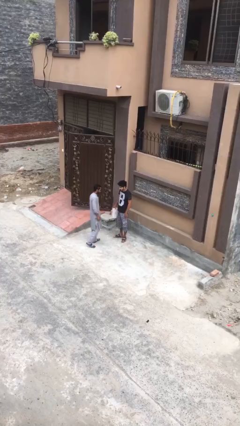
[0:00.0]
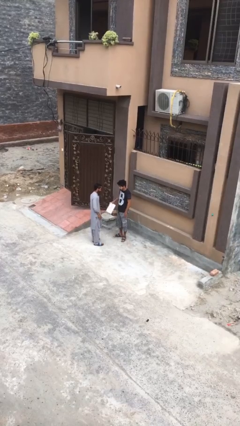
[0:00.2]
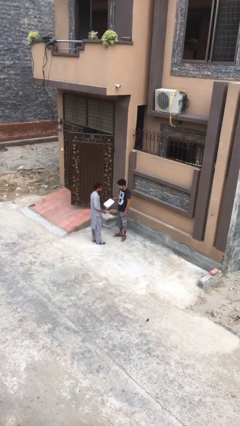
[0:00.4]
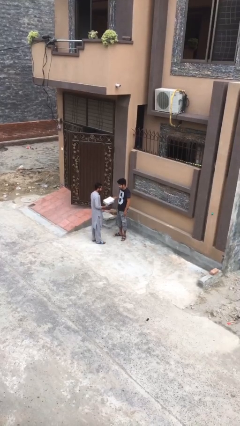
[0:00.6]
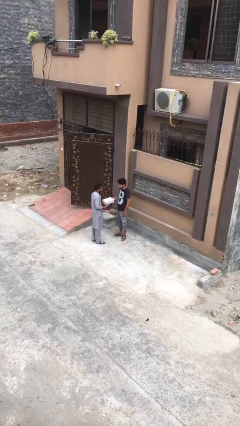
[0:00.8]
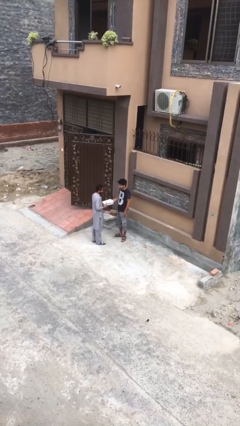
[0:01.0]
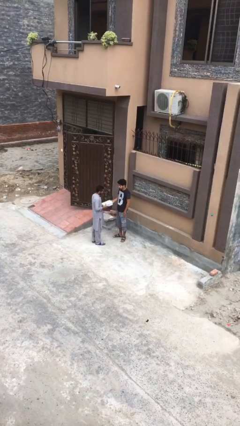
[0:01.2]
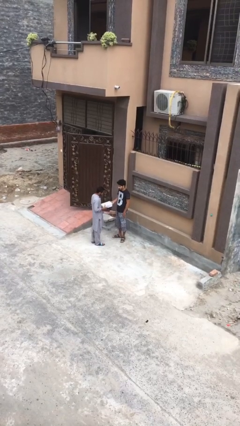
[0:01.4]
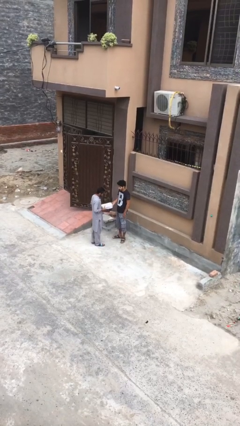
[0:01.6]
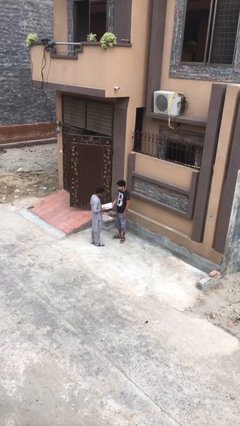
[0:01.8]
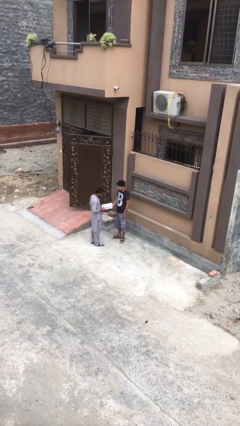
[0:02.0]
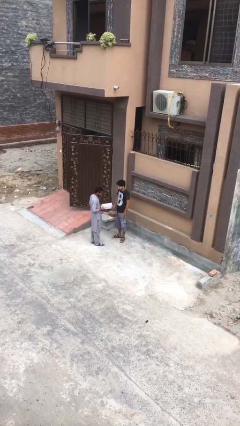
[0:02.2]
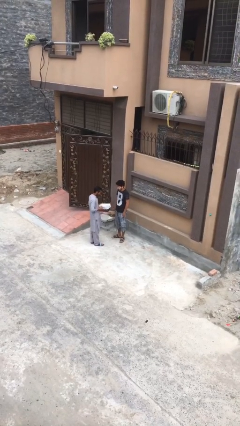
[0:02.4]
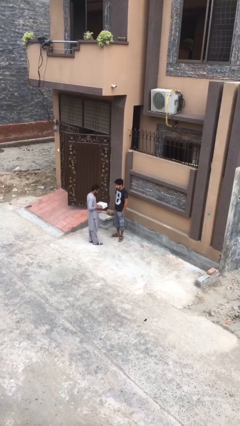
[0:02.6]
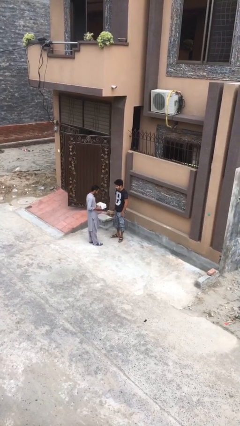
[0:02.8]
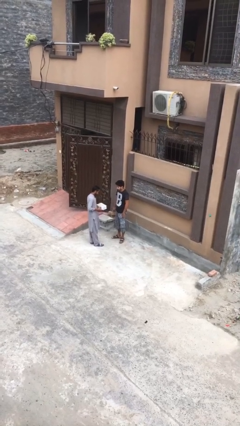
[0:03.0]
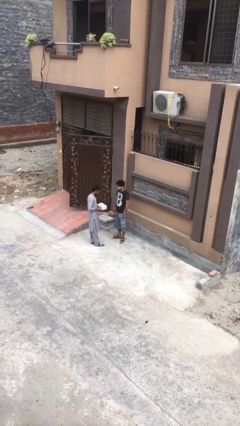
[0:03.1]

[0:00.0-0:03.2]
person transfers object to person

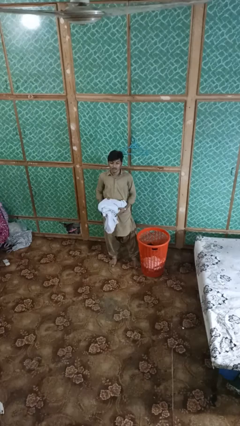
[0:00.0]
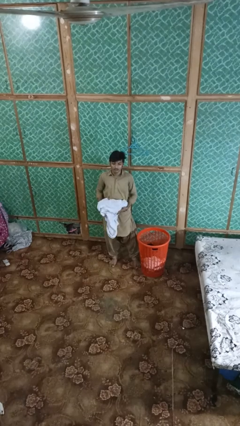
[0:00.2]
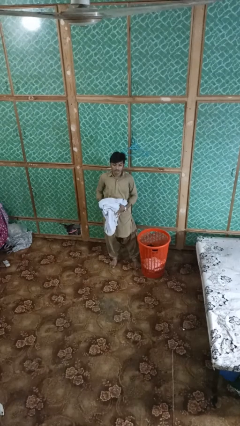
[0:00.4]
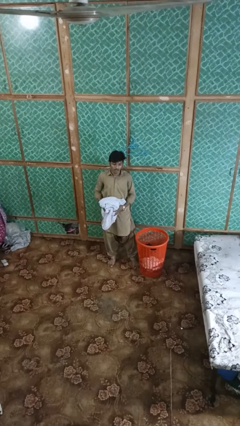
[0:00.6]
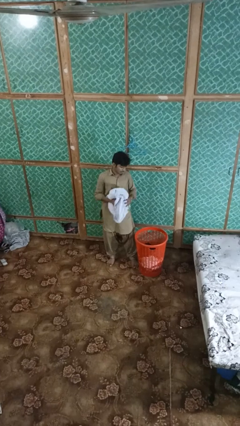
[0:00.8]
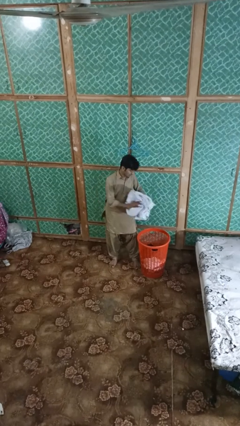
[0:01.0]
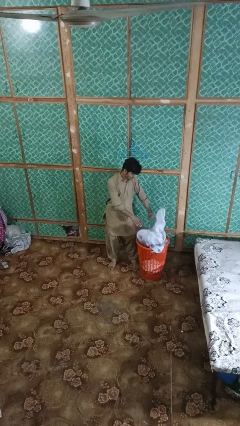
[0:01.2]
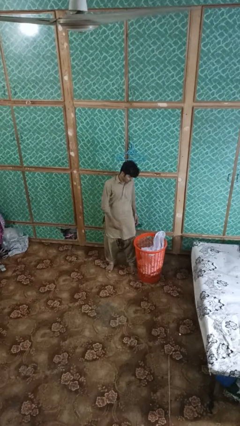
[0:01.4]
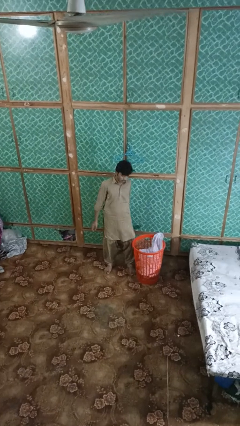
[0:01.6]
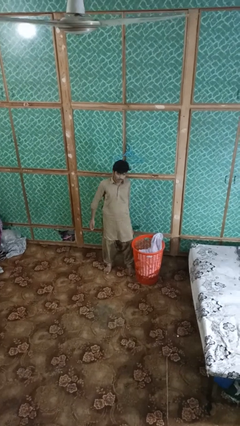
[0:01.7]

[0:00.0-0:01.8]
person puts object into basket

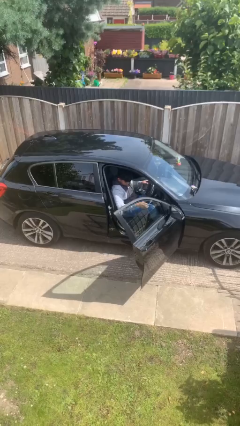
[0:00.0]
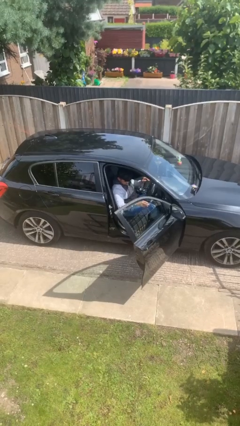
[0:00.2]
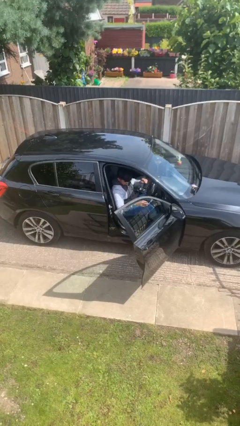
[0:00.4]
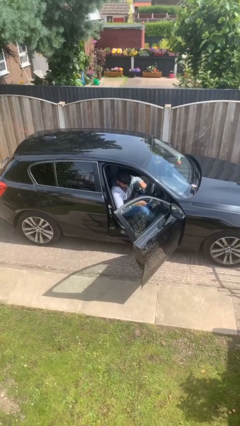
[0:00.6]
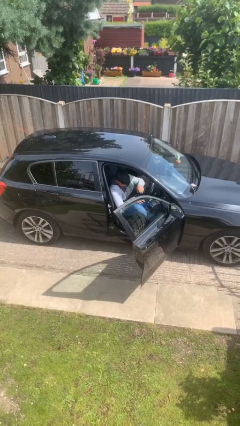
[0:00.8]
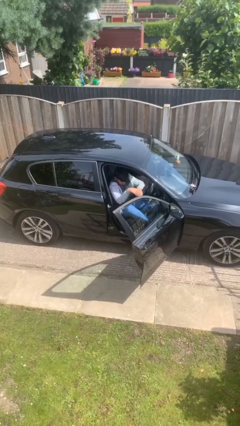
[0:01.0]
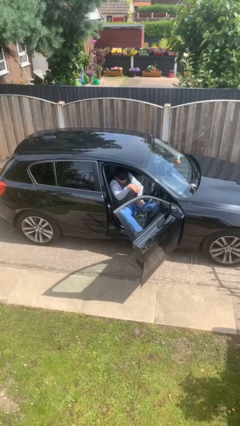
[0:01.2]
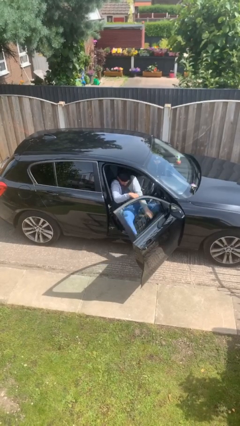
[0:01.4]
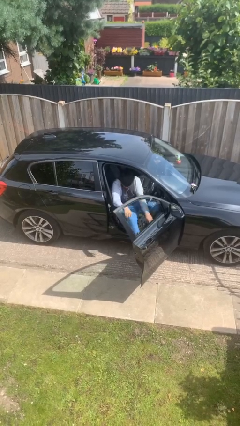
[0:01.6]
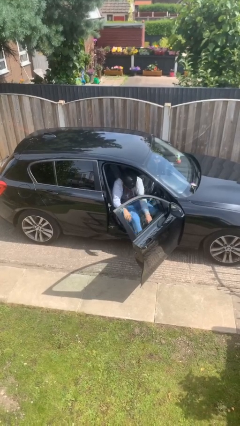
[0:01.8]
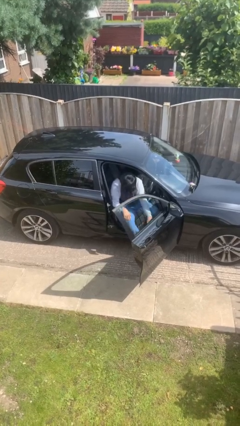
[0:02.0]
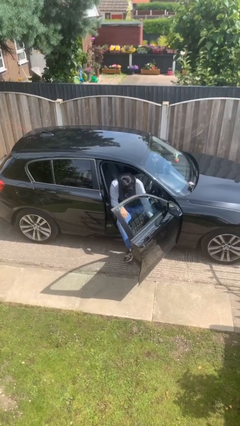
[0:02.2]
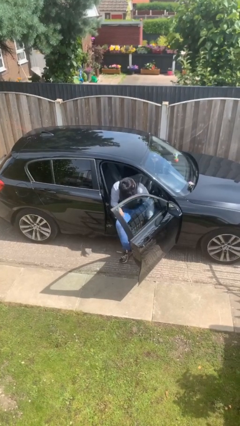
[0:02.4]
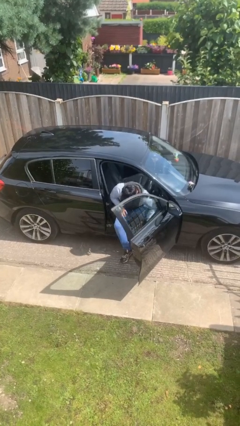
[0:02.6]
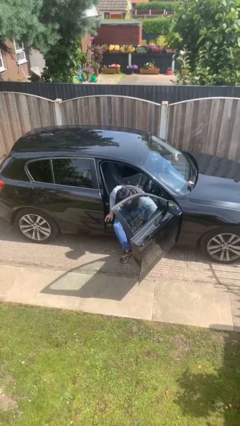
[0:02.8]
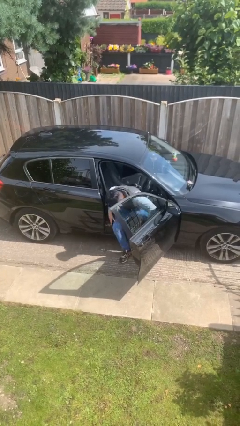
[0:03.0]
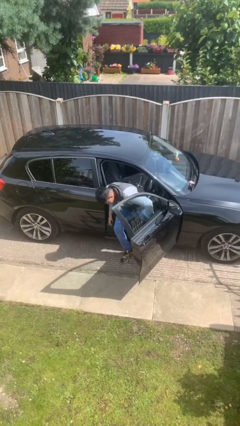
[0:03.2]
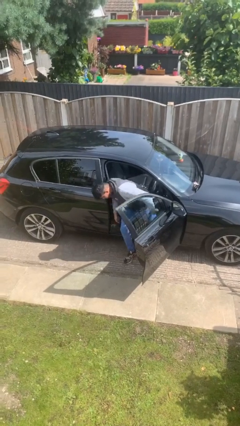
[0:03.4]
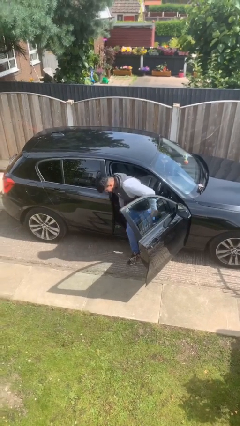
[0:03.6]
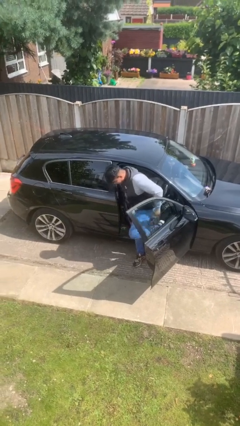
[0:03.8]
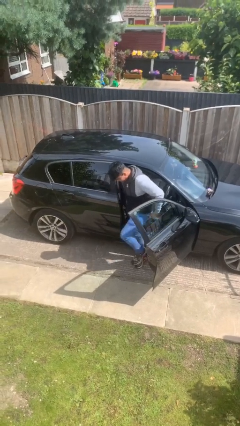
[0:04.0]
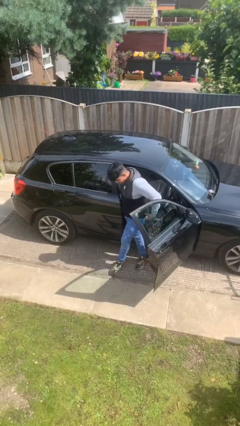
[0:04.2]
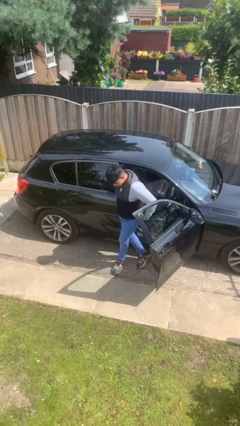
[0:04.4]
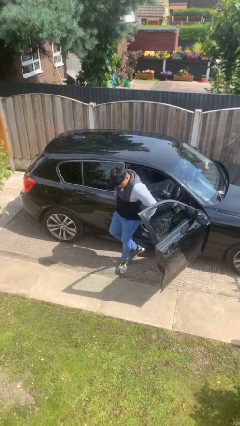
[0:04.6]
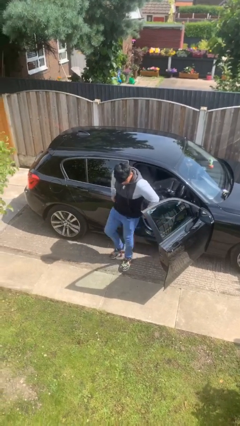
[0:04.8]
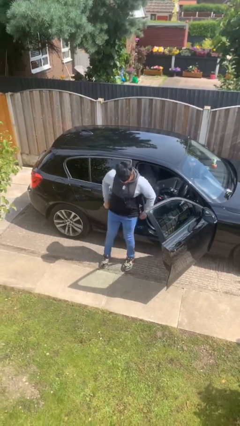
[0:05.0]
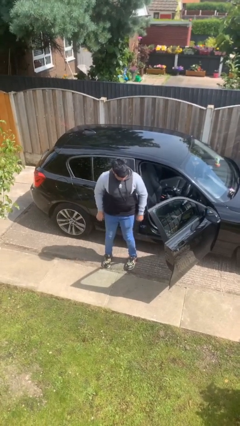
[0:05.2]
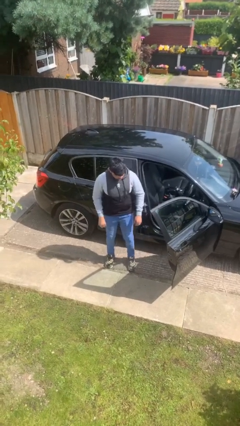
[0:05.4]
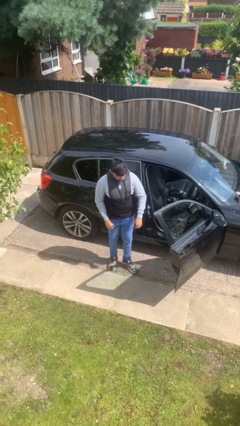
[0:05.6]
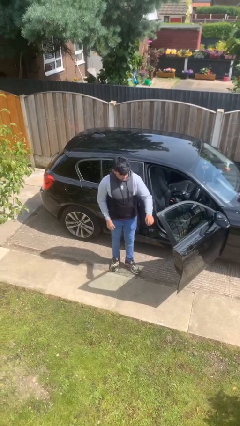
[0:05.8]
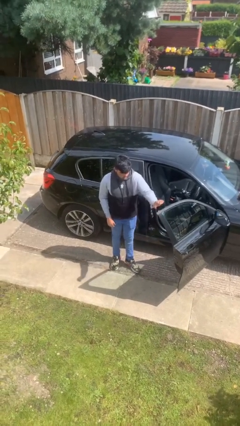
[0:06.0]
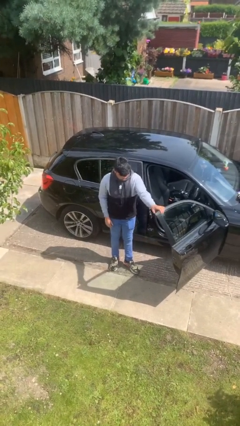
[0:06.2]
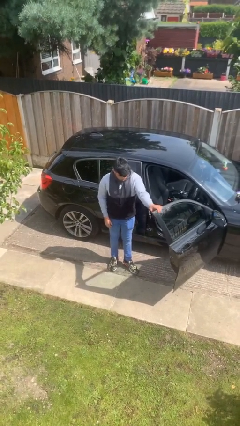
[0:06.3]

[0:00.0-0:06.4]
person exits car

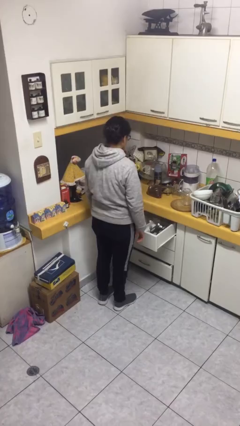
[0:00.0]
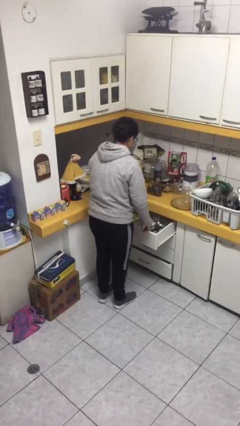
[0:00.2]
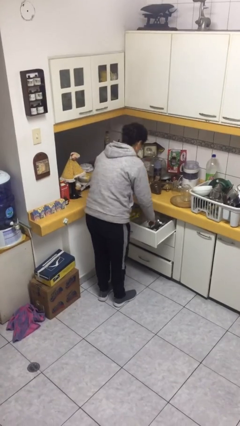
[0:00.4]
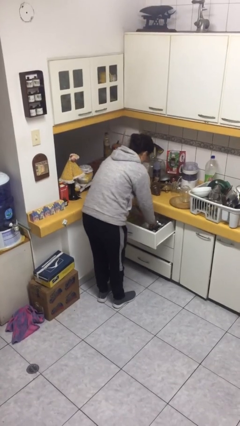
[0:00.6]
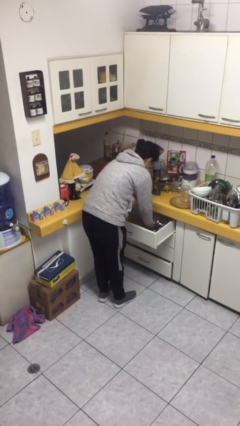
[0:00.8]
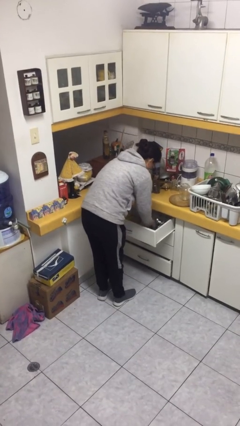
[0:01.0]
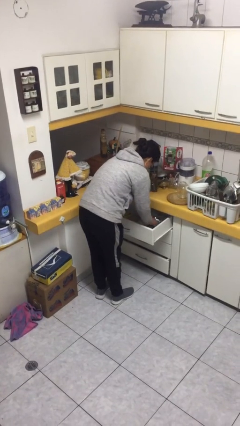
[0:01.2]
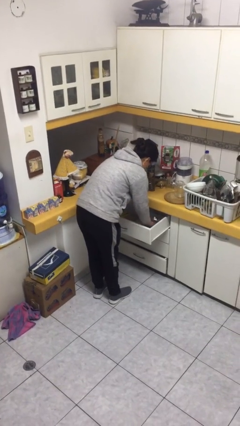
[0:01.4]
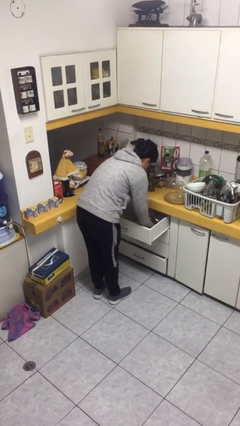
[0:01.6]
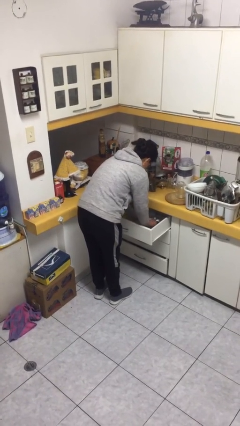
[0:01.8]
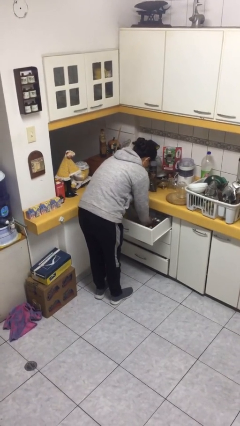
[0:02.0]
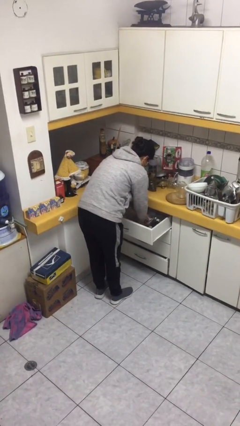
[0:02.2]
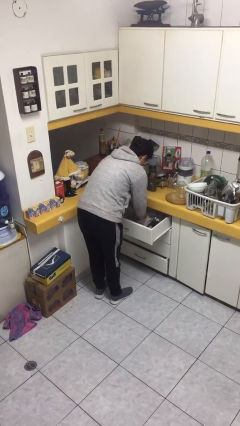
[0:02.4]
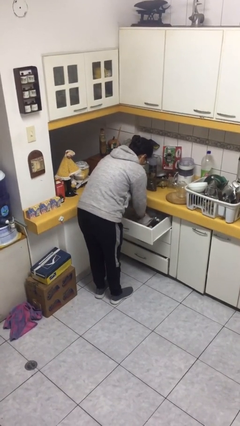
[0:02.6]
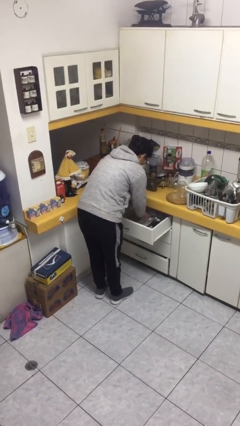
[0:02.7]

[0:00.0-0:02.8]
person searches in kitchen drawer

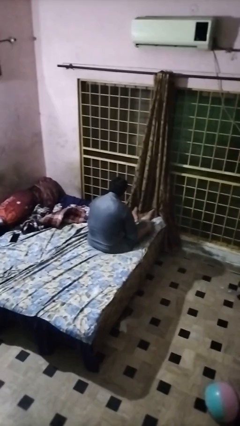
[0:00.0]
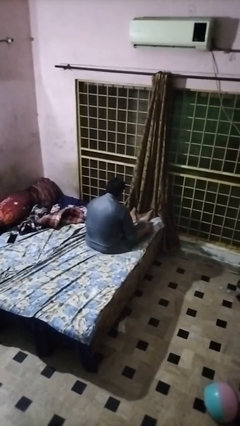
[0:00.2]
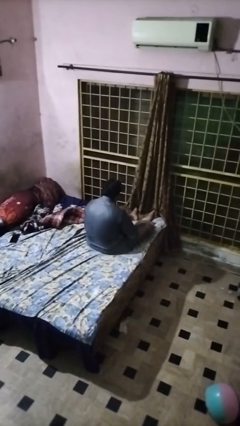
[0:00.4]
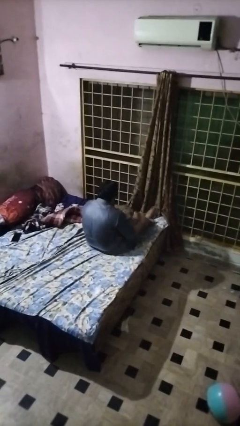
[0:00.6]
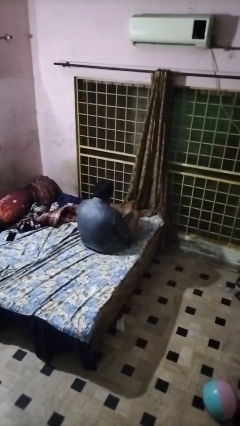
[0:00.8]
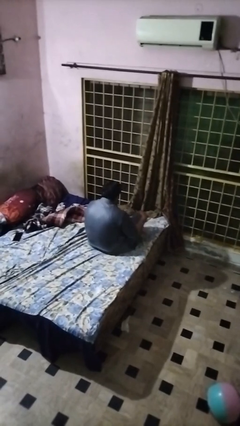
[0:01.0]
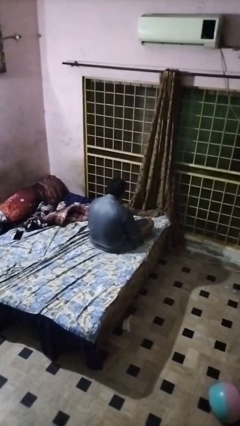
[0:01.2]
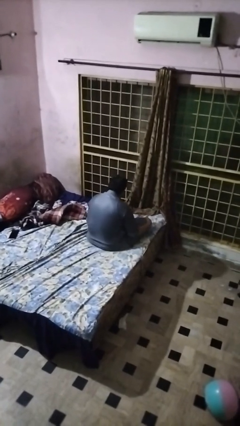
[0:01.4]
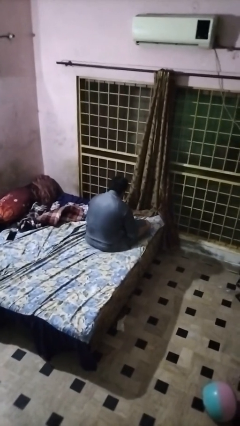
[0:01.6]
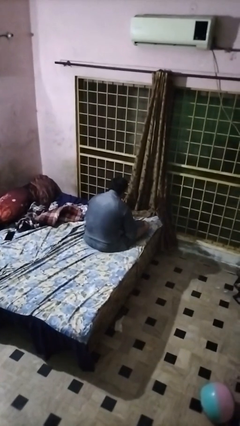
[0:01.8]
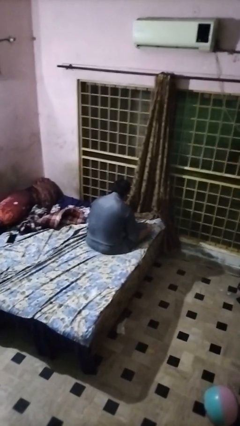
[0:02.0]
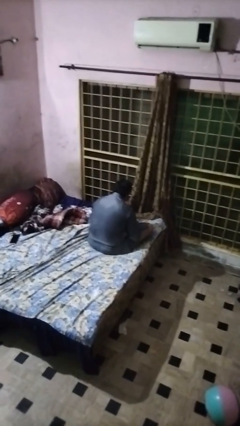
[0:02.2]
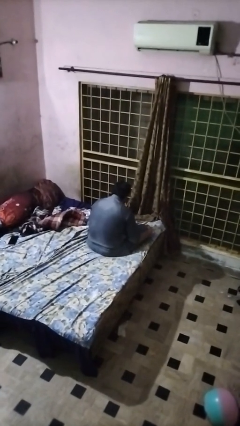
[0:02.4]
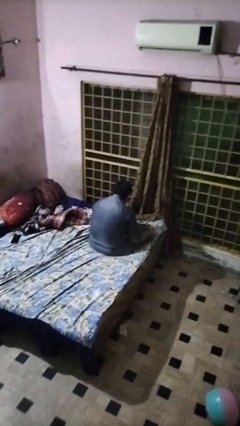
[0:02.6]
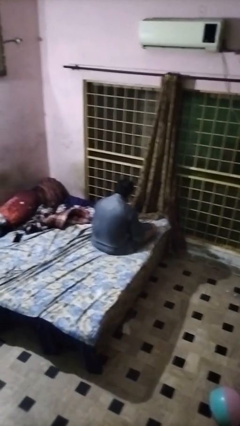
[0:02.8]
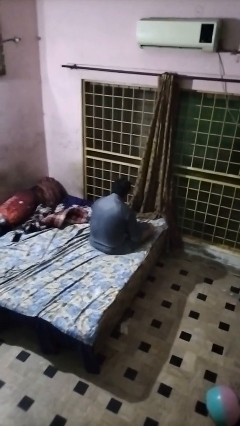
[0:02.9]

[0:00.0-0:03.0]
person crosses legs
